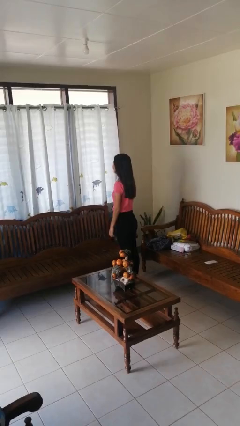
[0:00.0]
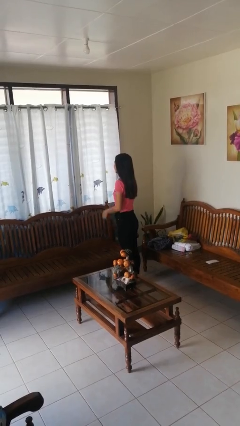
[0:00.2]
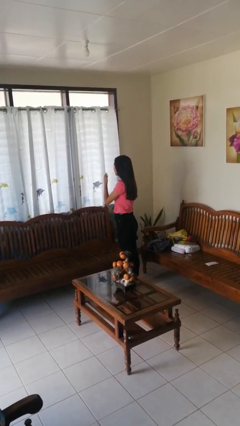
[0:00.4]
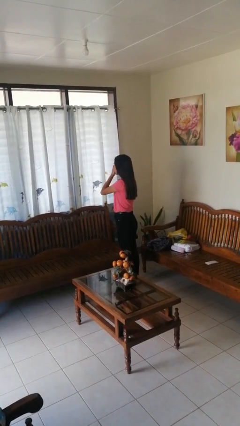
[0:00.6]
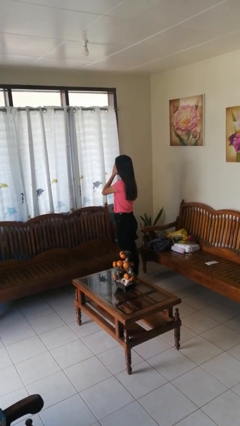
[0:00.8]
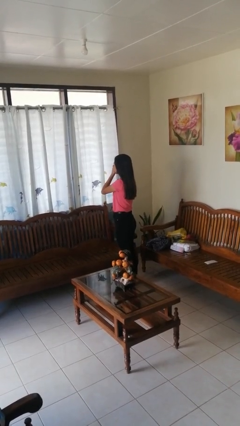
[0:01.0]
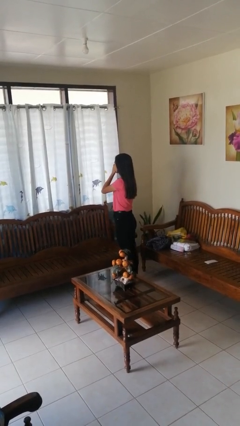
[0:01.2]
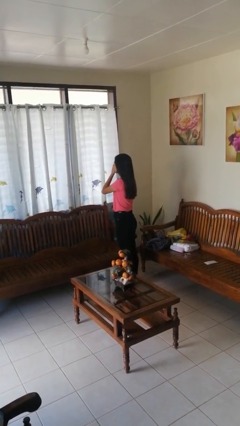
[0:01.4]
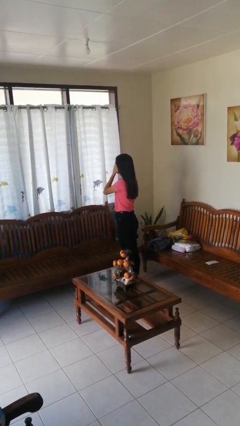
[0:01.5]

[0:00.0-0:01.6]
person yawns

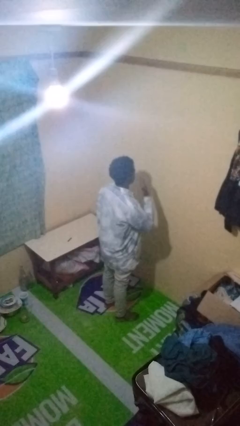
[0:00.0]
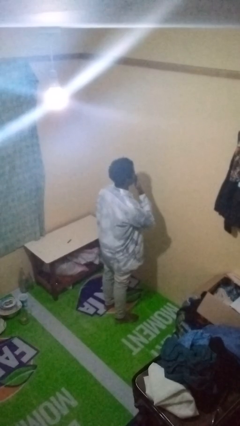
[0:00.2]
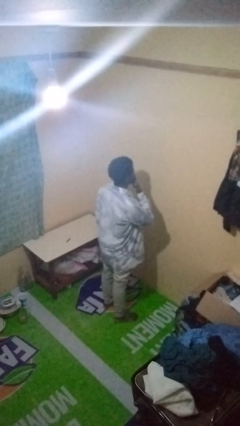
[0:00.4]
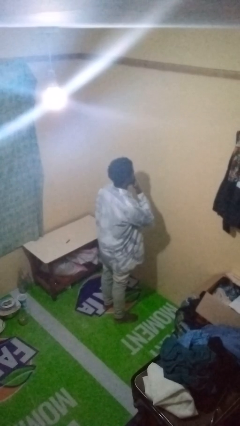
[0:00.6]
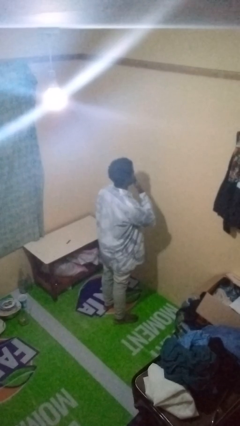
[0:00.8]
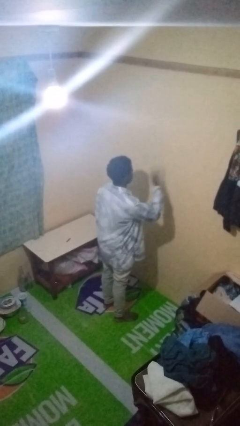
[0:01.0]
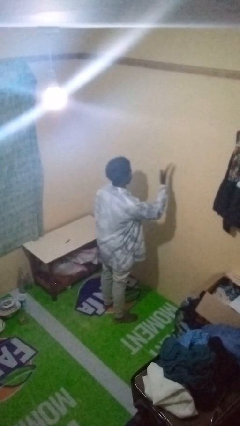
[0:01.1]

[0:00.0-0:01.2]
person gestures blow kiss

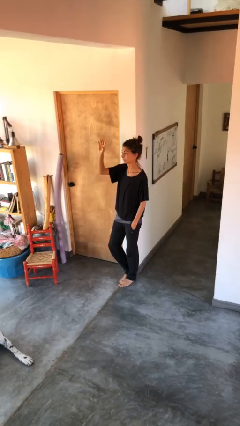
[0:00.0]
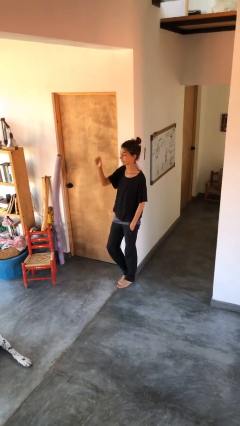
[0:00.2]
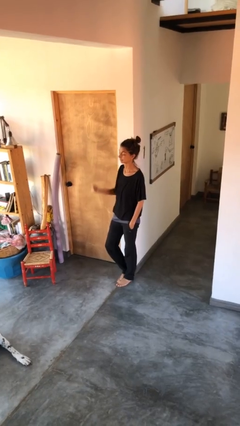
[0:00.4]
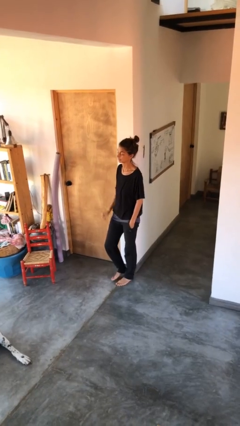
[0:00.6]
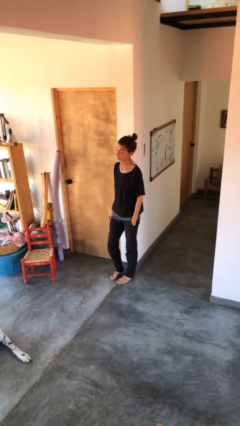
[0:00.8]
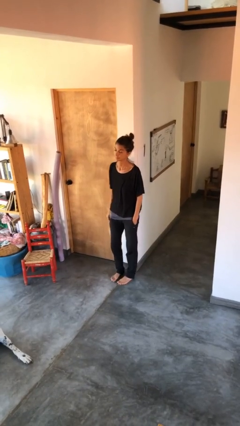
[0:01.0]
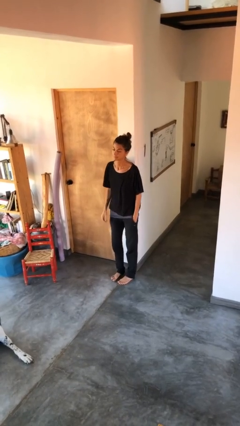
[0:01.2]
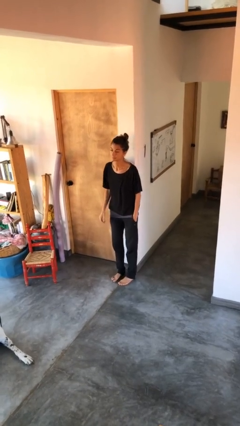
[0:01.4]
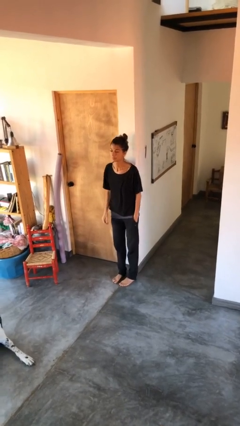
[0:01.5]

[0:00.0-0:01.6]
person gestures lower hand

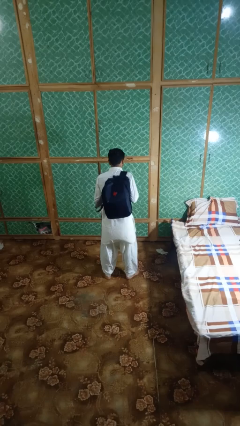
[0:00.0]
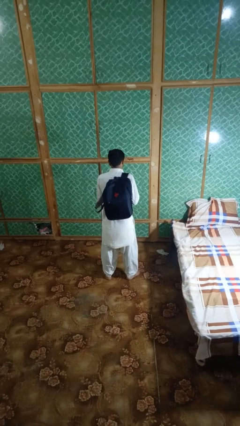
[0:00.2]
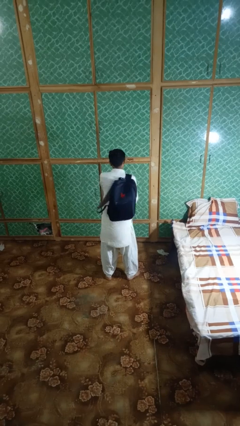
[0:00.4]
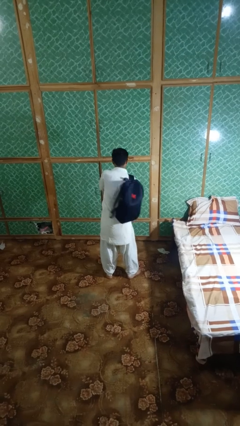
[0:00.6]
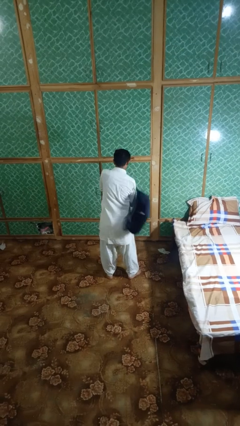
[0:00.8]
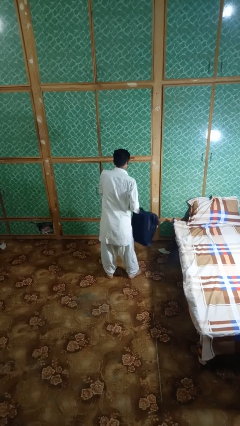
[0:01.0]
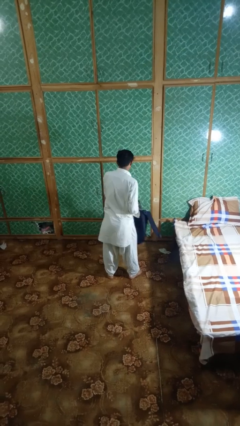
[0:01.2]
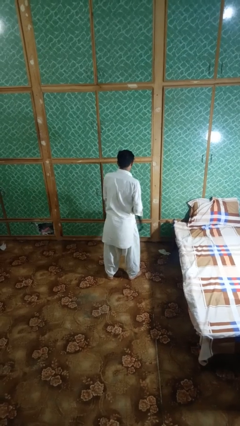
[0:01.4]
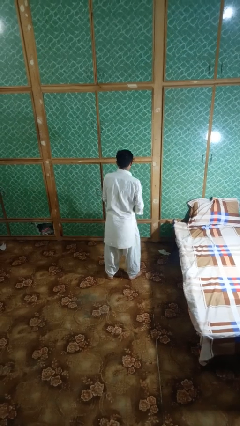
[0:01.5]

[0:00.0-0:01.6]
person takes off backpack

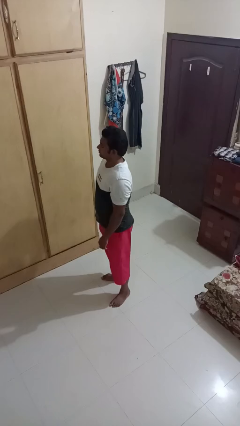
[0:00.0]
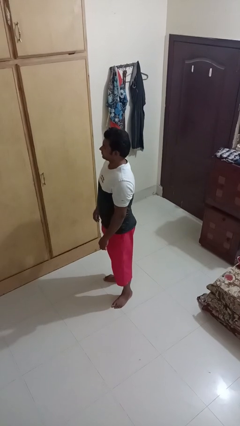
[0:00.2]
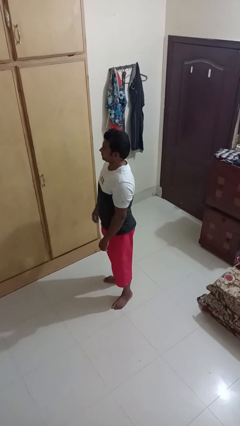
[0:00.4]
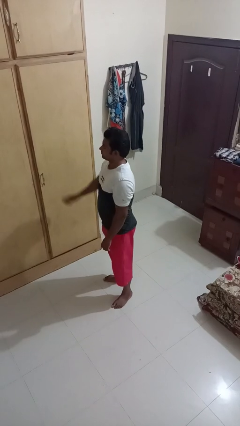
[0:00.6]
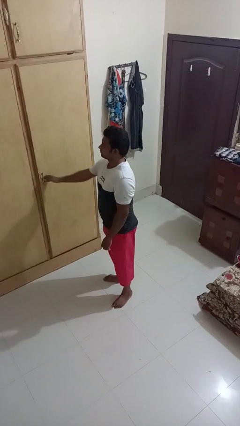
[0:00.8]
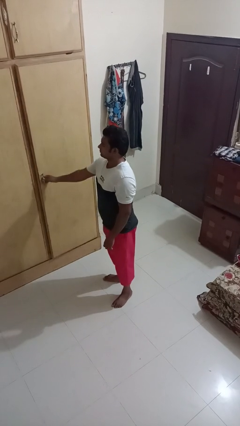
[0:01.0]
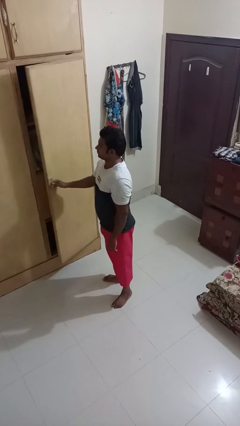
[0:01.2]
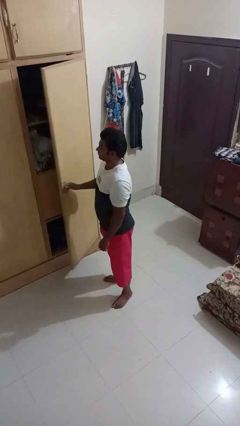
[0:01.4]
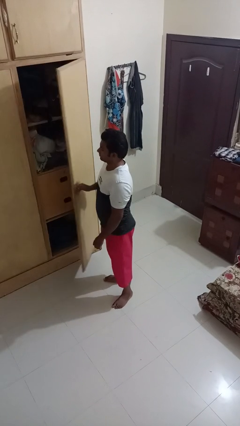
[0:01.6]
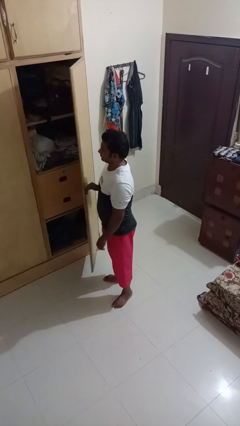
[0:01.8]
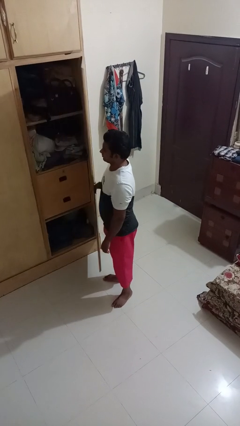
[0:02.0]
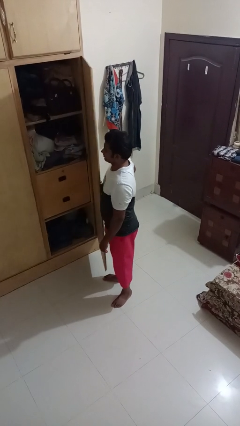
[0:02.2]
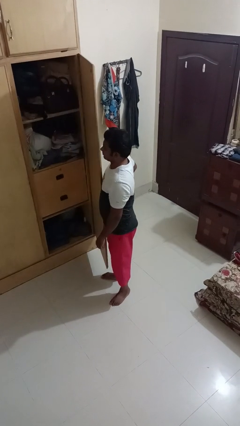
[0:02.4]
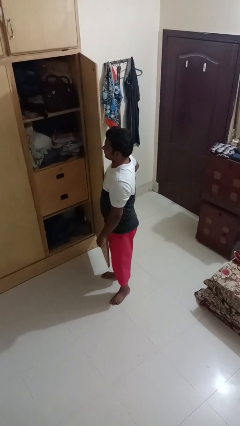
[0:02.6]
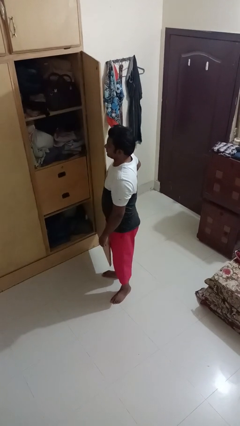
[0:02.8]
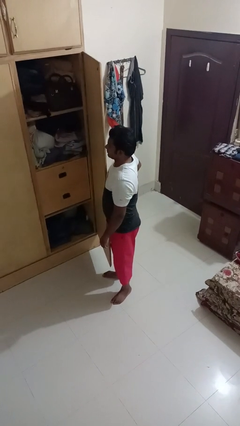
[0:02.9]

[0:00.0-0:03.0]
person opens closet door

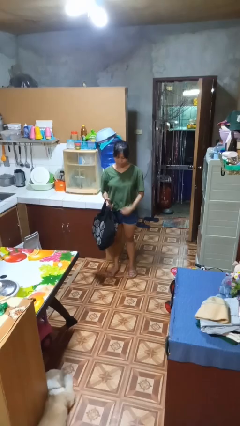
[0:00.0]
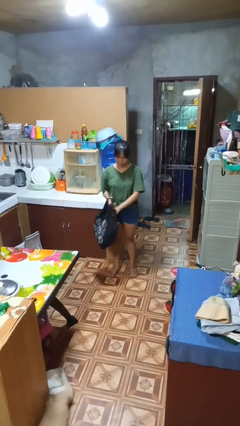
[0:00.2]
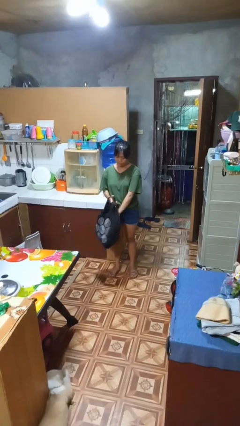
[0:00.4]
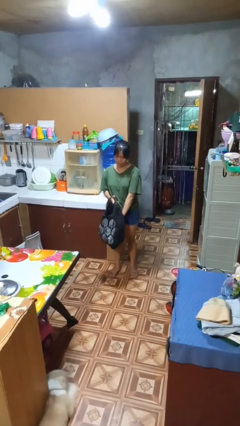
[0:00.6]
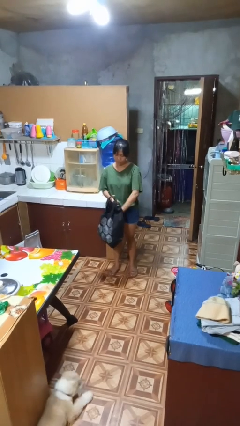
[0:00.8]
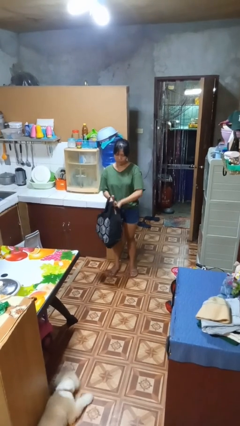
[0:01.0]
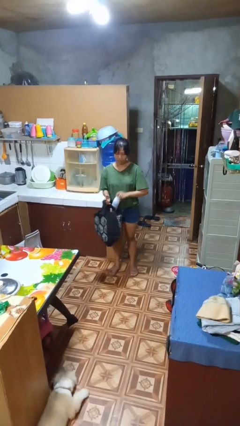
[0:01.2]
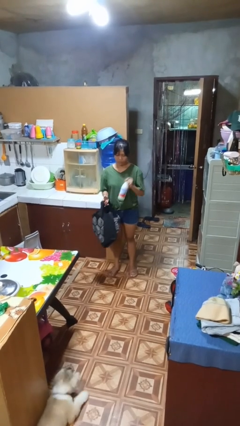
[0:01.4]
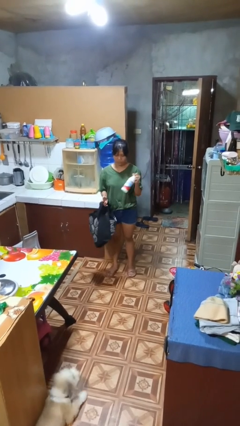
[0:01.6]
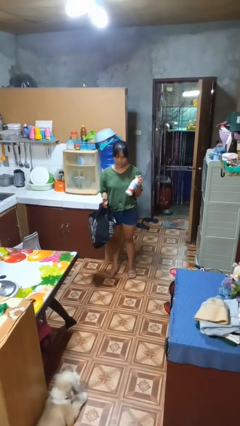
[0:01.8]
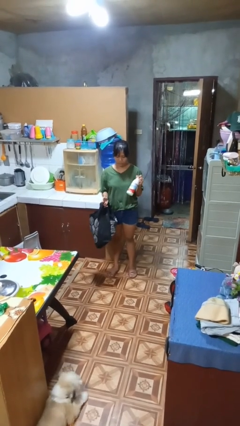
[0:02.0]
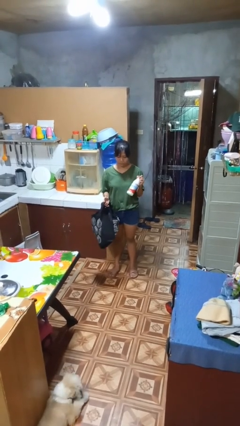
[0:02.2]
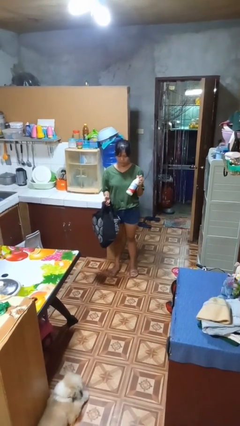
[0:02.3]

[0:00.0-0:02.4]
person takes object from bag

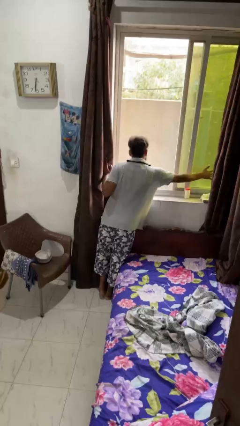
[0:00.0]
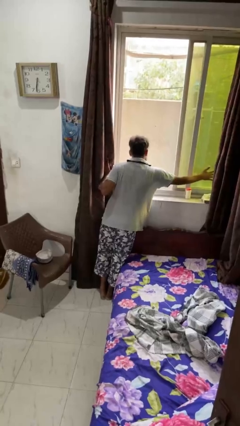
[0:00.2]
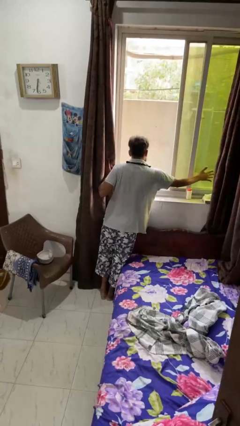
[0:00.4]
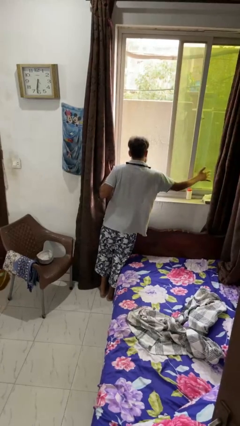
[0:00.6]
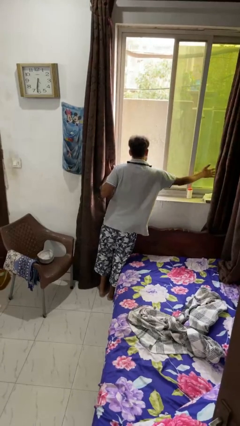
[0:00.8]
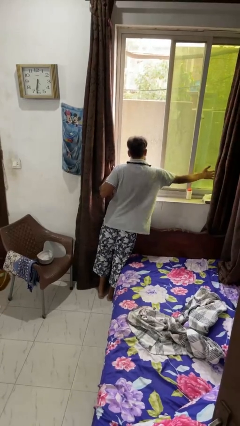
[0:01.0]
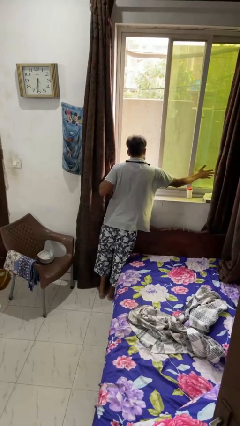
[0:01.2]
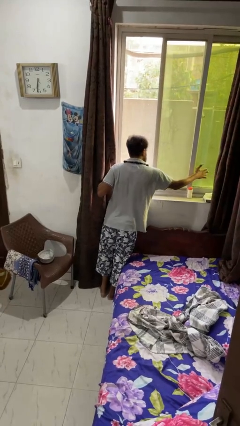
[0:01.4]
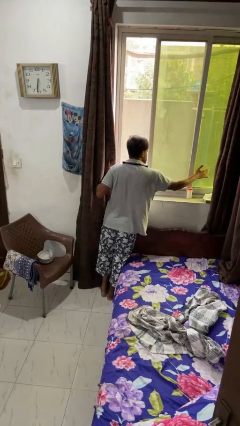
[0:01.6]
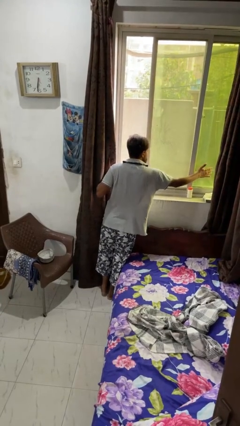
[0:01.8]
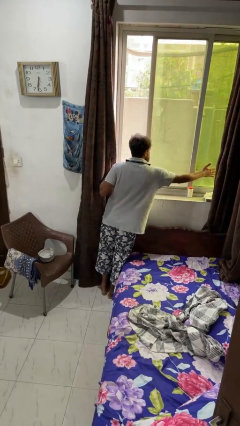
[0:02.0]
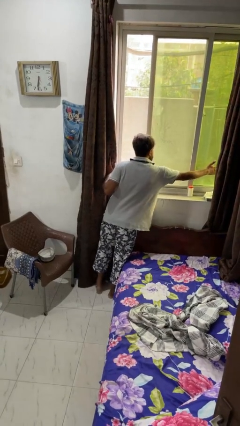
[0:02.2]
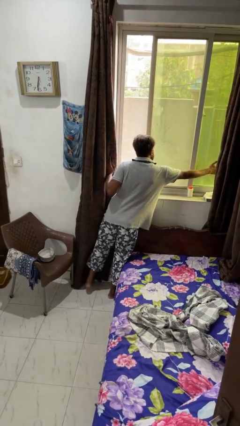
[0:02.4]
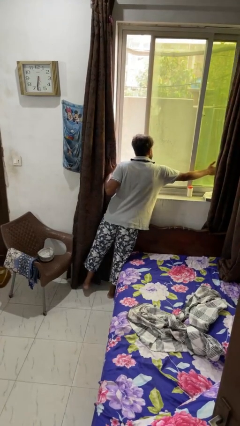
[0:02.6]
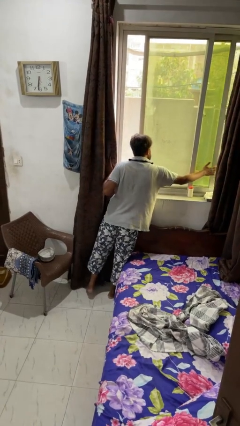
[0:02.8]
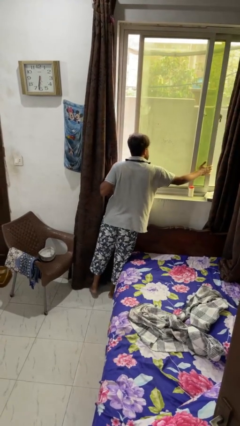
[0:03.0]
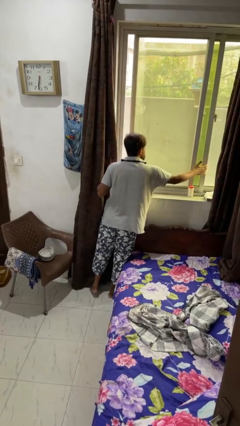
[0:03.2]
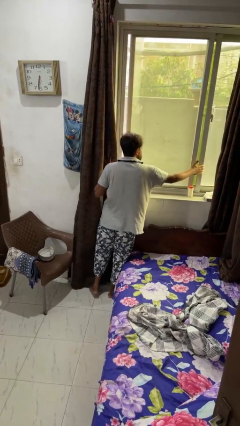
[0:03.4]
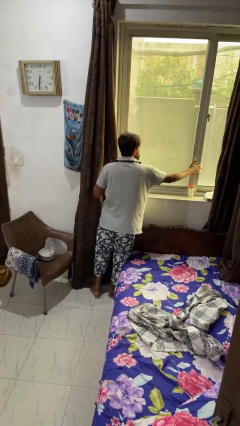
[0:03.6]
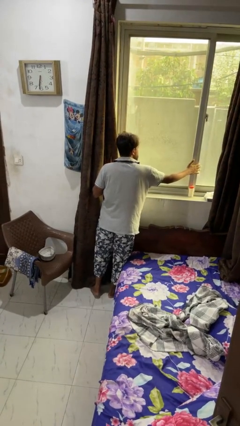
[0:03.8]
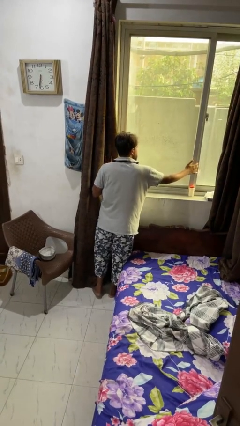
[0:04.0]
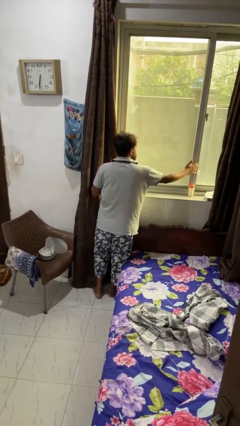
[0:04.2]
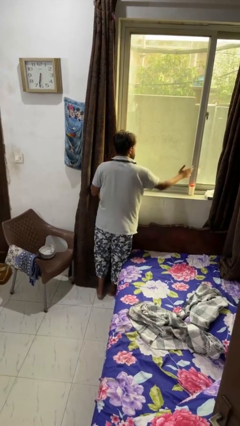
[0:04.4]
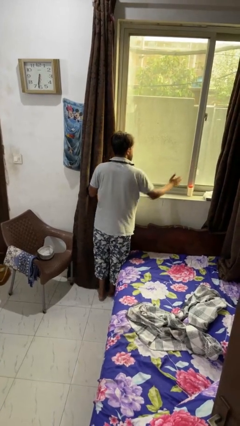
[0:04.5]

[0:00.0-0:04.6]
person closes home window

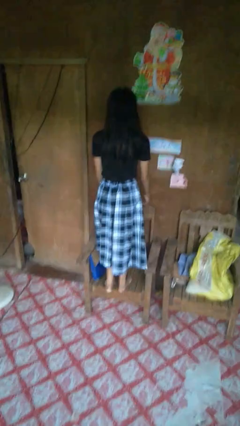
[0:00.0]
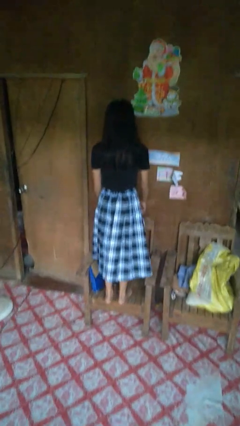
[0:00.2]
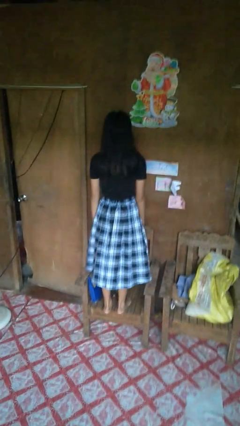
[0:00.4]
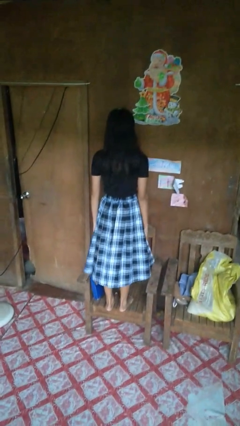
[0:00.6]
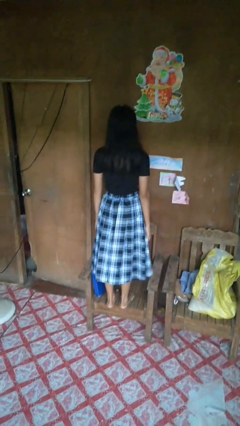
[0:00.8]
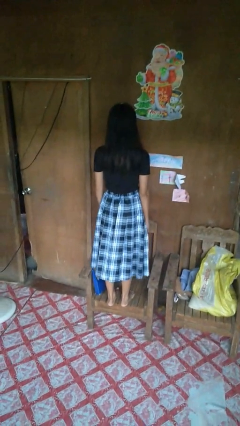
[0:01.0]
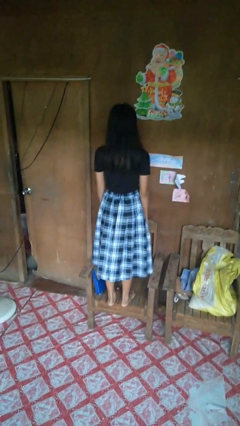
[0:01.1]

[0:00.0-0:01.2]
person climbs on chair
